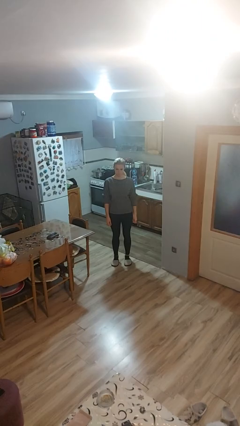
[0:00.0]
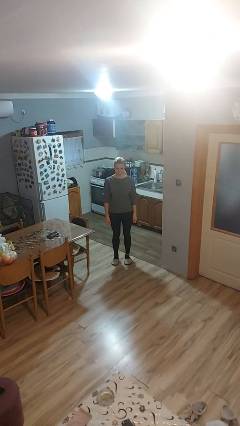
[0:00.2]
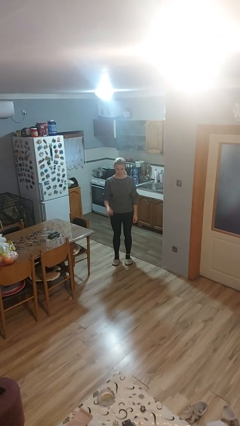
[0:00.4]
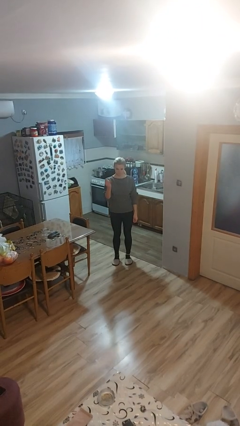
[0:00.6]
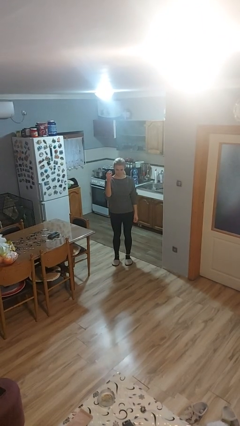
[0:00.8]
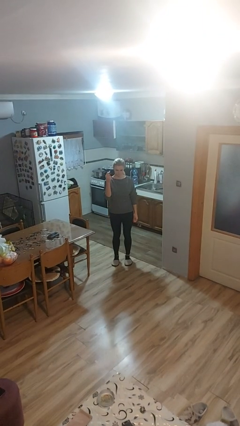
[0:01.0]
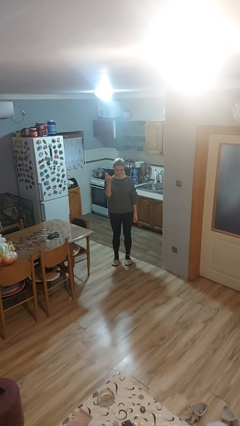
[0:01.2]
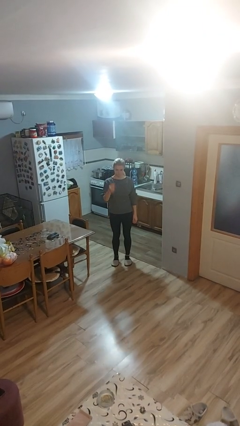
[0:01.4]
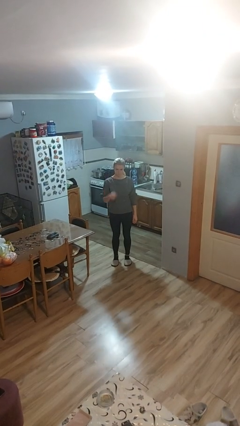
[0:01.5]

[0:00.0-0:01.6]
person snaps fingers

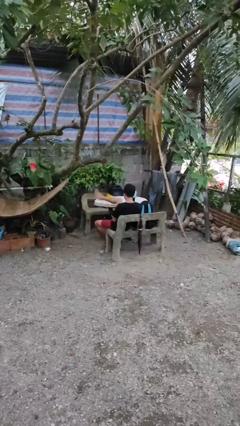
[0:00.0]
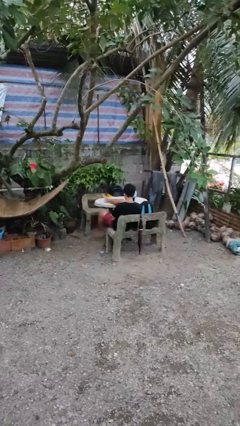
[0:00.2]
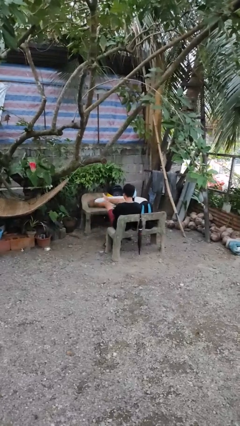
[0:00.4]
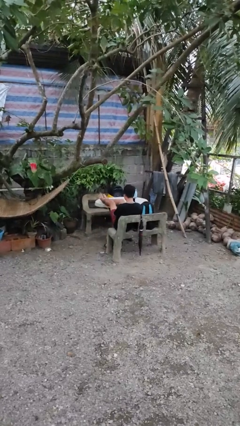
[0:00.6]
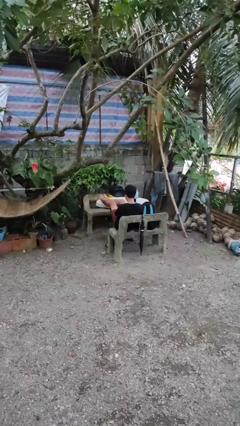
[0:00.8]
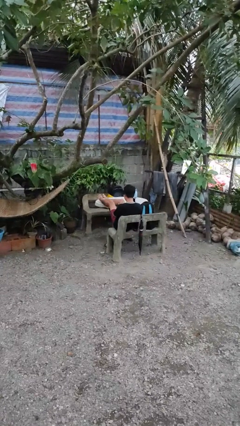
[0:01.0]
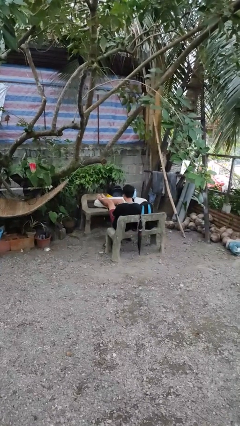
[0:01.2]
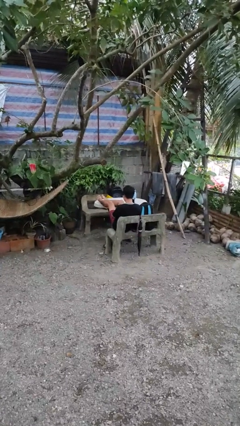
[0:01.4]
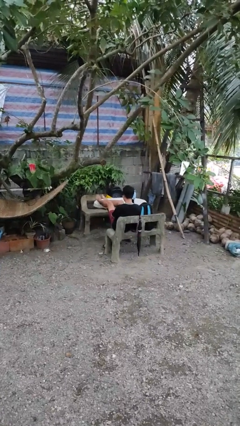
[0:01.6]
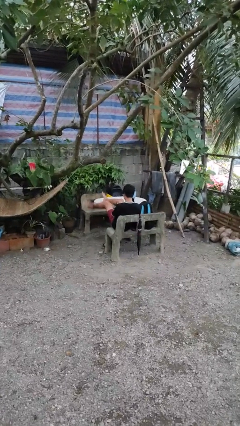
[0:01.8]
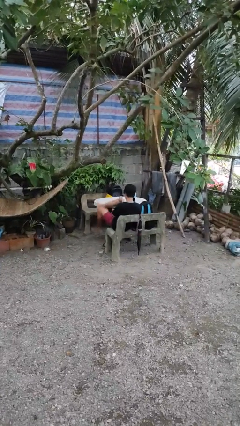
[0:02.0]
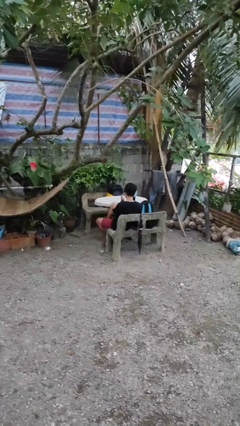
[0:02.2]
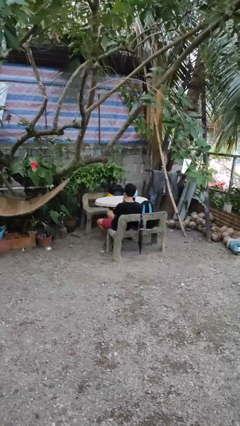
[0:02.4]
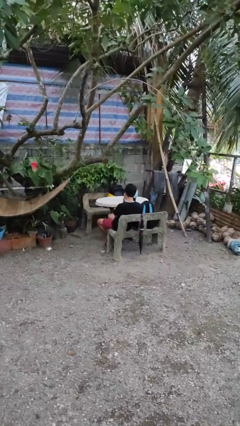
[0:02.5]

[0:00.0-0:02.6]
person puts feet up

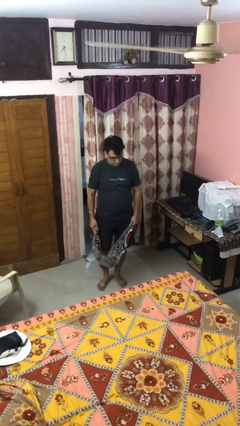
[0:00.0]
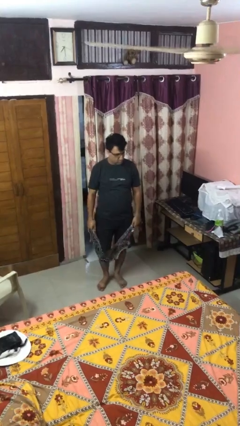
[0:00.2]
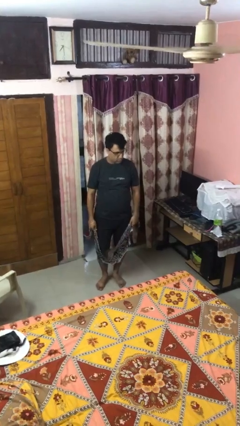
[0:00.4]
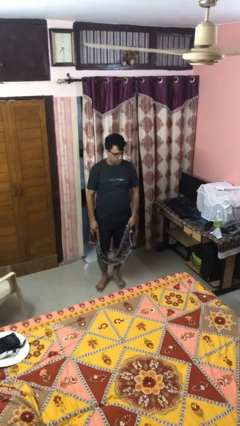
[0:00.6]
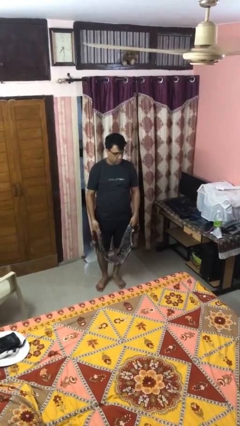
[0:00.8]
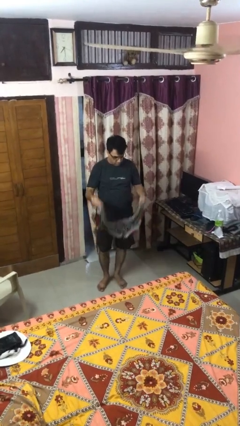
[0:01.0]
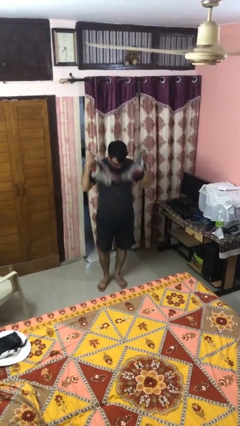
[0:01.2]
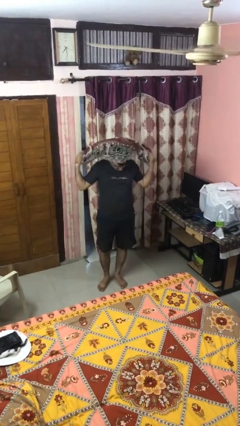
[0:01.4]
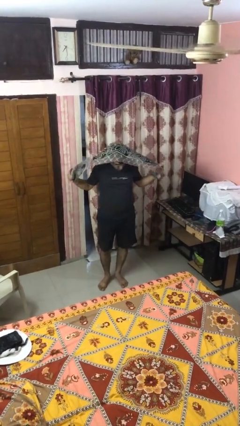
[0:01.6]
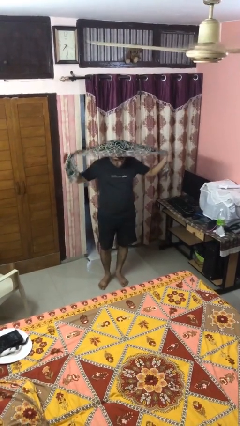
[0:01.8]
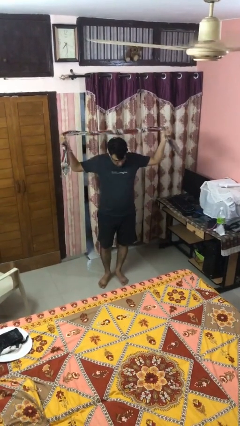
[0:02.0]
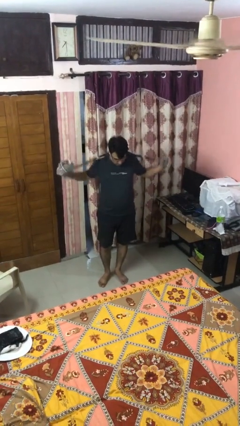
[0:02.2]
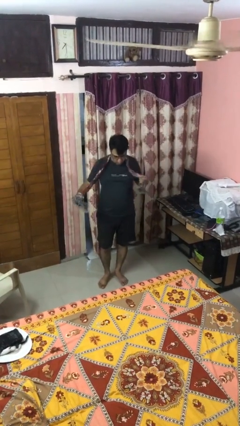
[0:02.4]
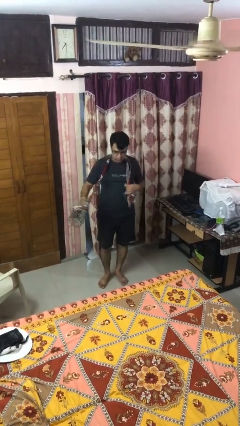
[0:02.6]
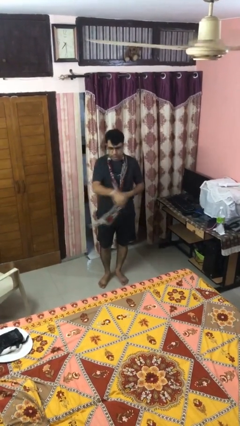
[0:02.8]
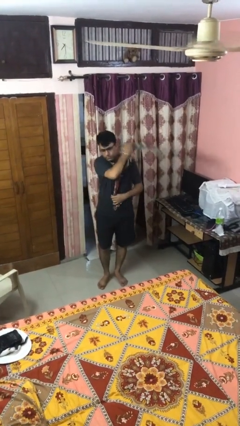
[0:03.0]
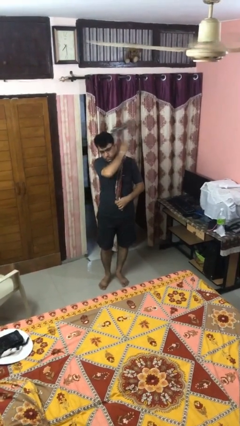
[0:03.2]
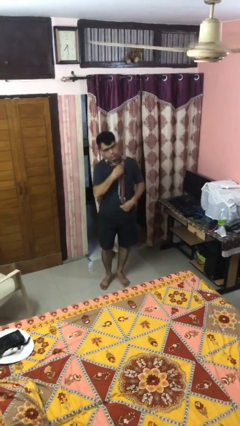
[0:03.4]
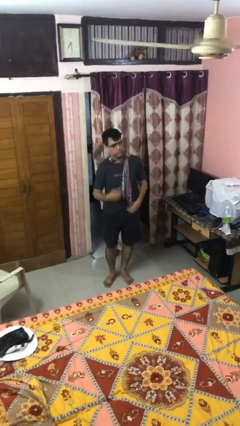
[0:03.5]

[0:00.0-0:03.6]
person puts on scarf

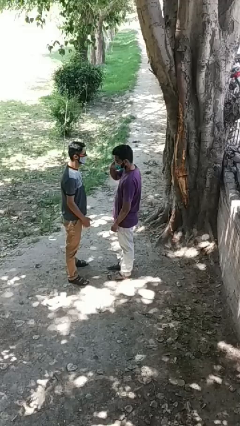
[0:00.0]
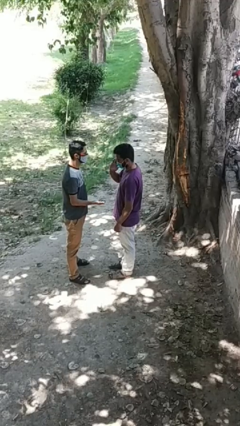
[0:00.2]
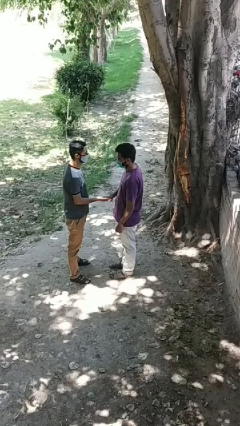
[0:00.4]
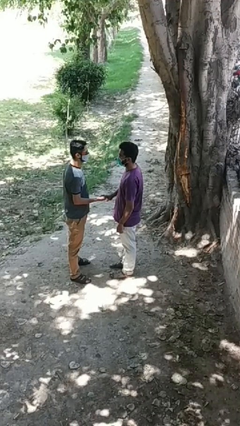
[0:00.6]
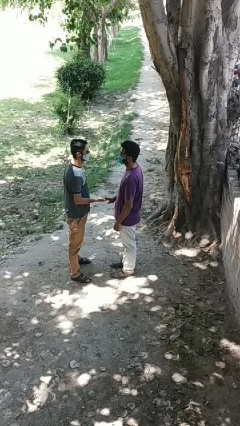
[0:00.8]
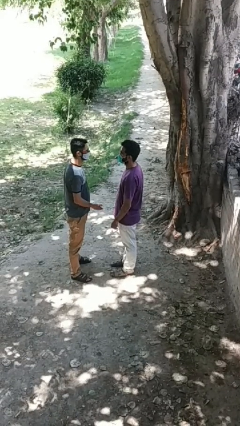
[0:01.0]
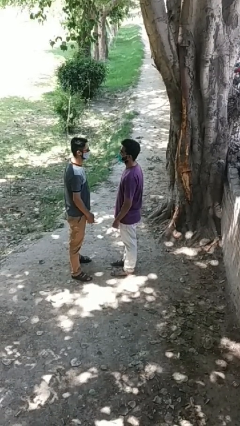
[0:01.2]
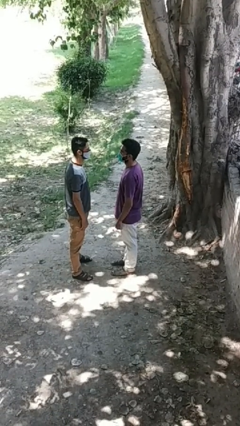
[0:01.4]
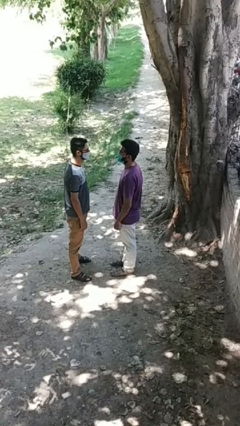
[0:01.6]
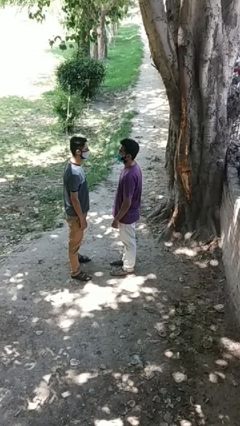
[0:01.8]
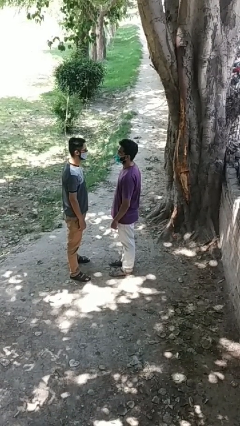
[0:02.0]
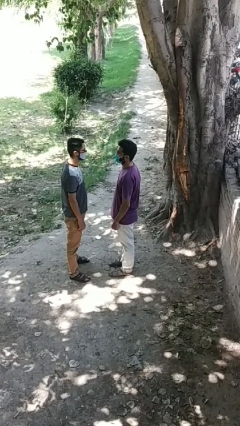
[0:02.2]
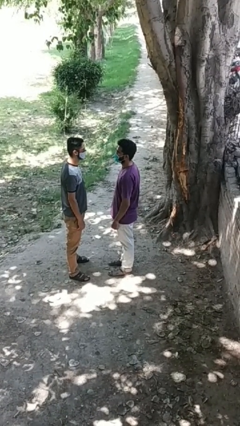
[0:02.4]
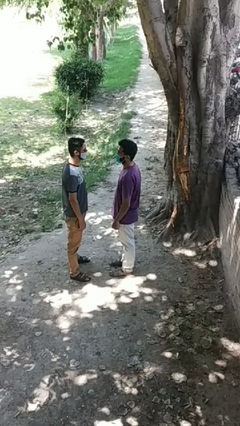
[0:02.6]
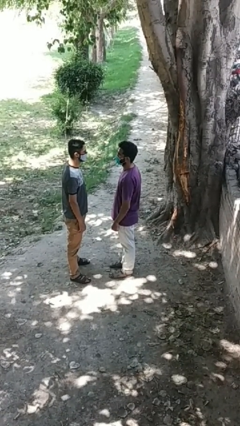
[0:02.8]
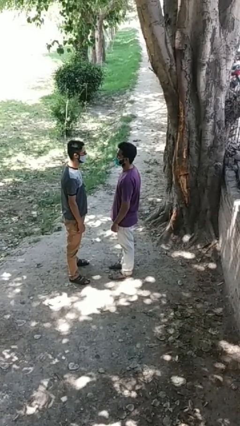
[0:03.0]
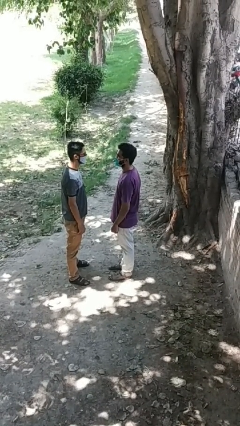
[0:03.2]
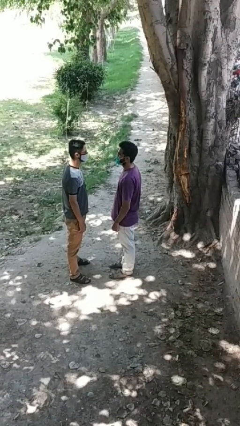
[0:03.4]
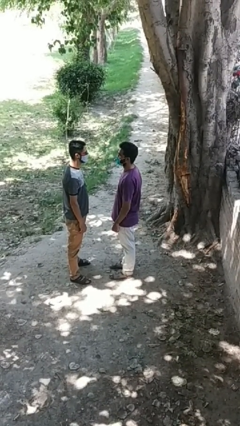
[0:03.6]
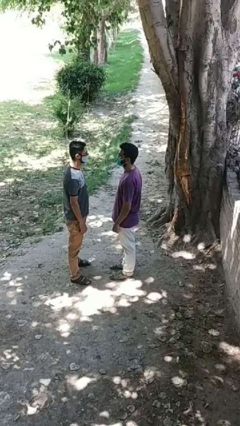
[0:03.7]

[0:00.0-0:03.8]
person highfives hand

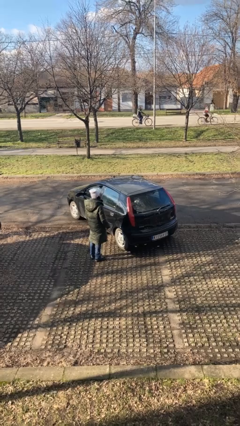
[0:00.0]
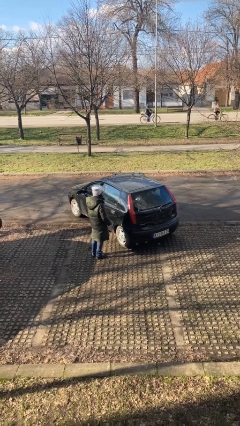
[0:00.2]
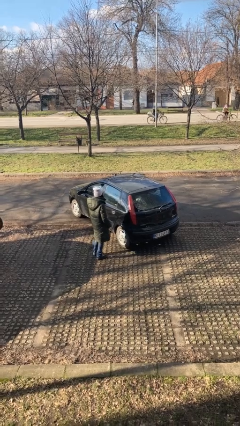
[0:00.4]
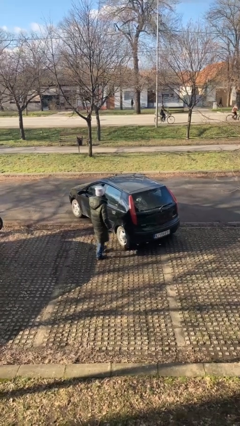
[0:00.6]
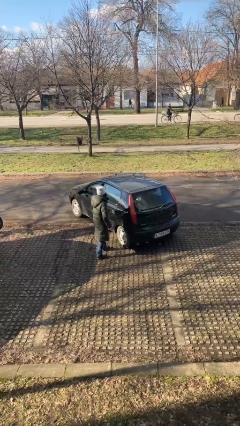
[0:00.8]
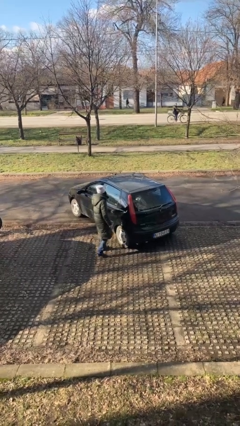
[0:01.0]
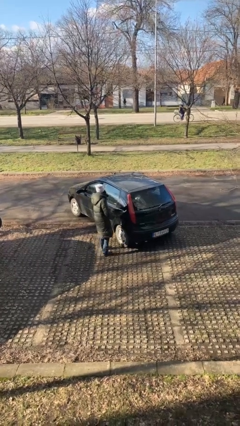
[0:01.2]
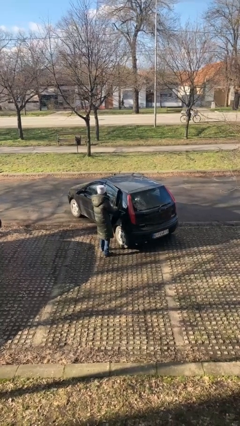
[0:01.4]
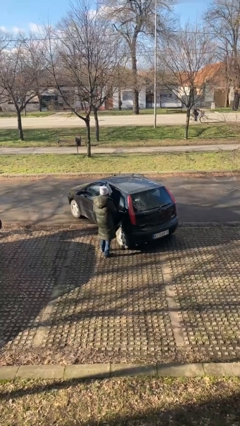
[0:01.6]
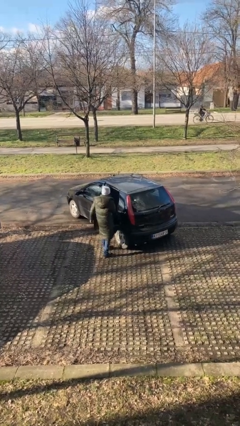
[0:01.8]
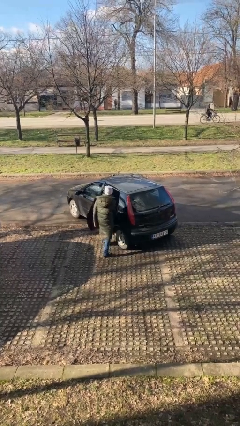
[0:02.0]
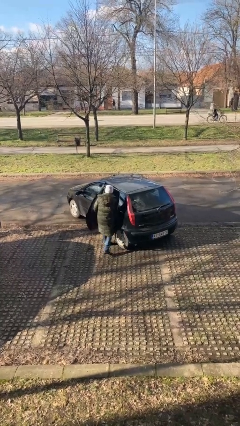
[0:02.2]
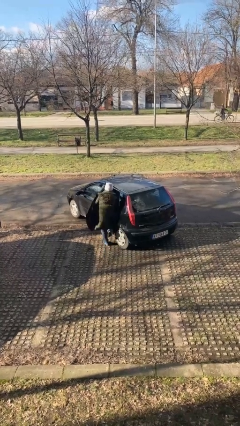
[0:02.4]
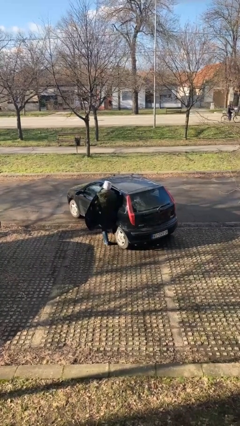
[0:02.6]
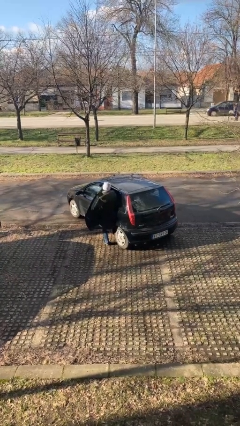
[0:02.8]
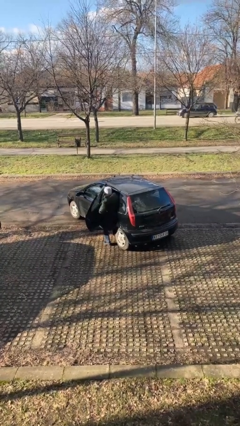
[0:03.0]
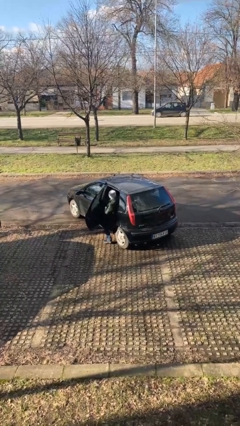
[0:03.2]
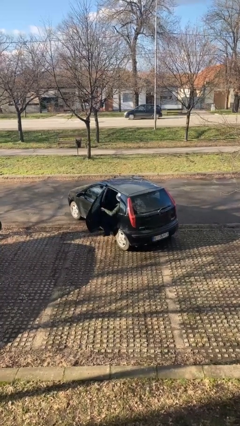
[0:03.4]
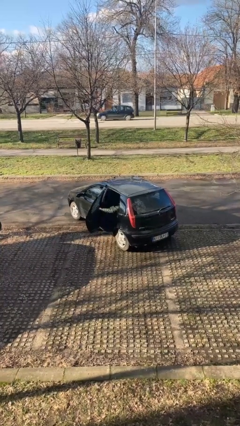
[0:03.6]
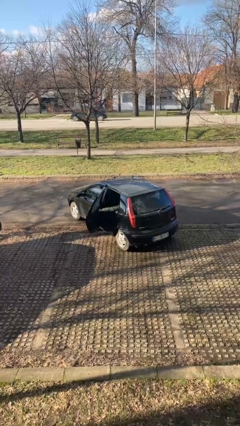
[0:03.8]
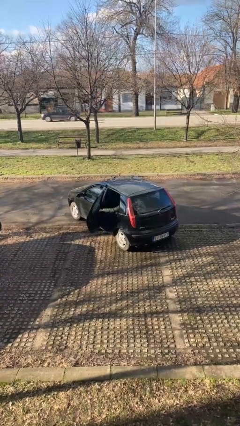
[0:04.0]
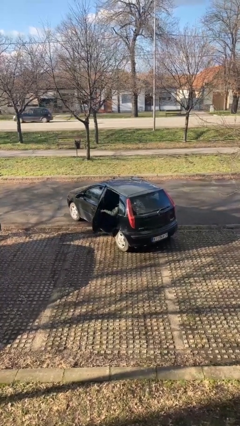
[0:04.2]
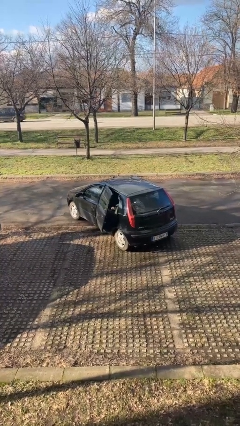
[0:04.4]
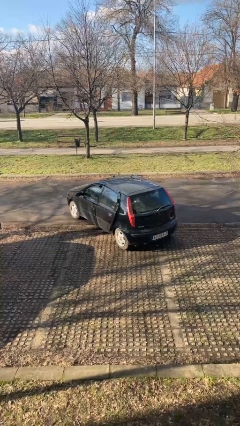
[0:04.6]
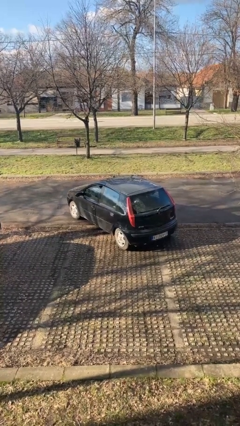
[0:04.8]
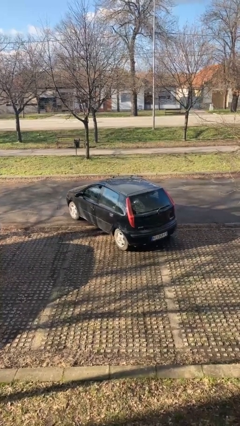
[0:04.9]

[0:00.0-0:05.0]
car picks up person

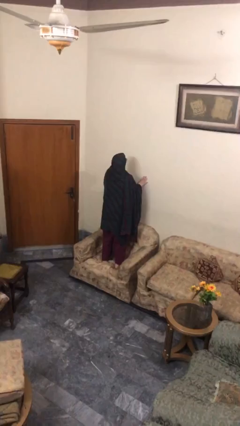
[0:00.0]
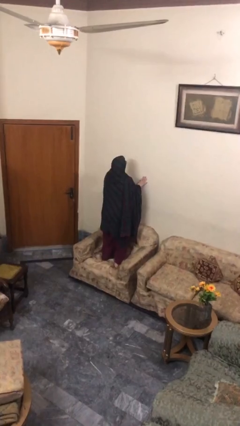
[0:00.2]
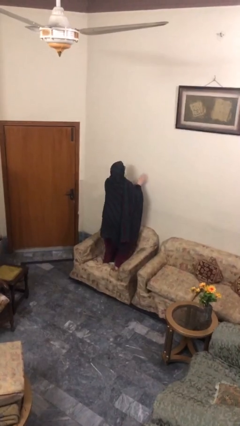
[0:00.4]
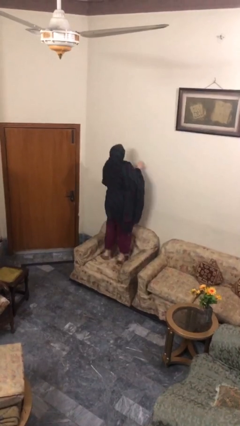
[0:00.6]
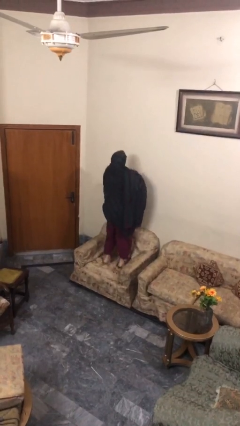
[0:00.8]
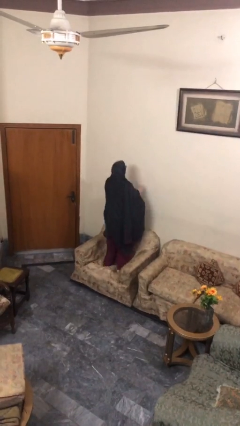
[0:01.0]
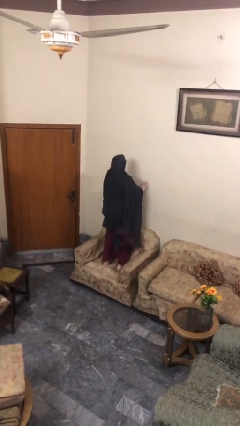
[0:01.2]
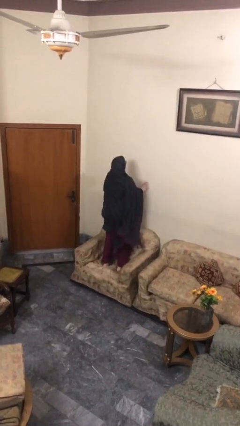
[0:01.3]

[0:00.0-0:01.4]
person jumps on couch
